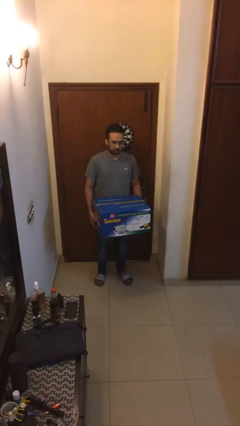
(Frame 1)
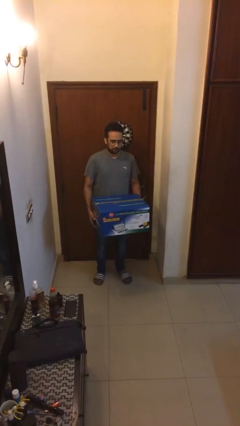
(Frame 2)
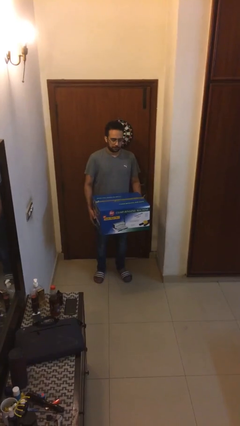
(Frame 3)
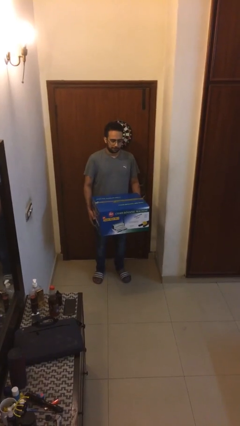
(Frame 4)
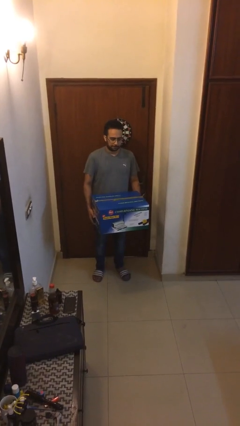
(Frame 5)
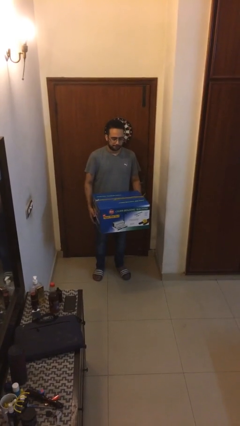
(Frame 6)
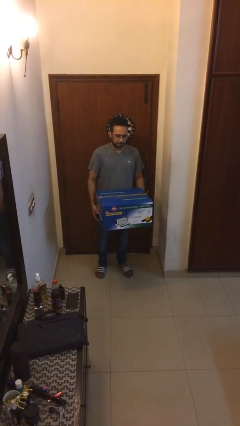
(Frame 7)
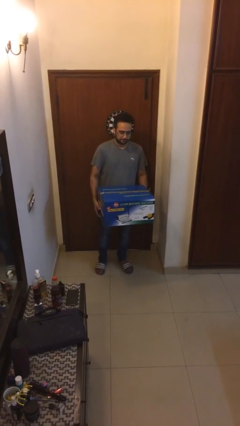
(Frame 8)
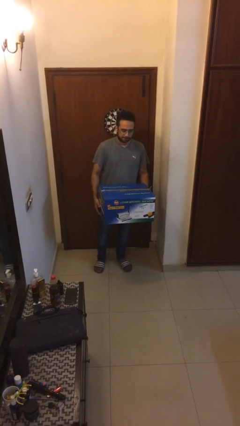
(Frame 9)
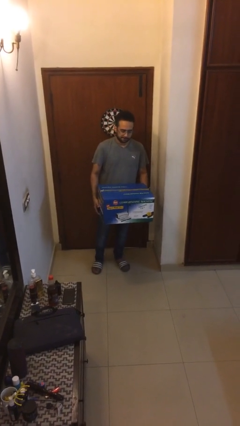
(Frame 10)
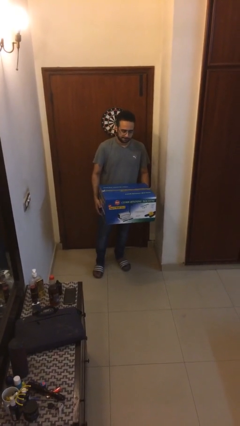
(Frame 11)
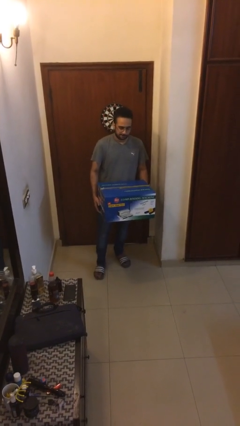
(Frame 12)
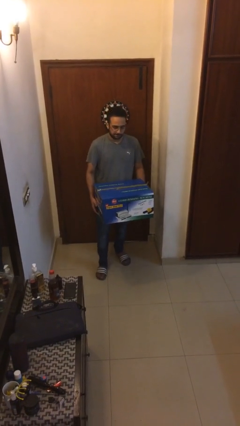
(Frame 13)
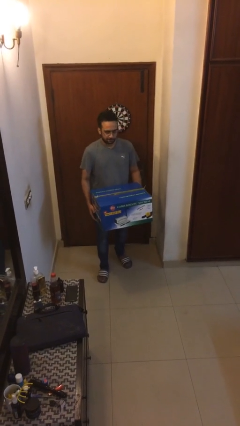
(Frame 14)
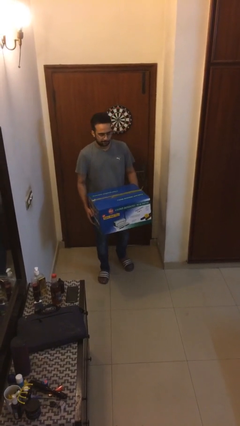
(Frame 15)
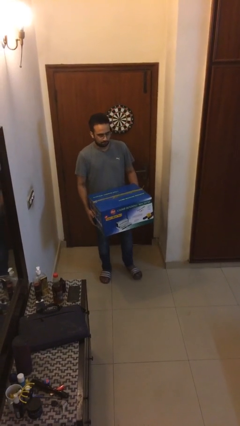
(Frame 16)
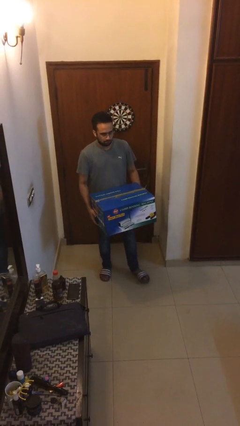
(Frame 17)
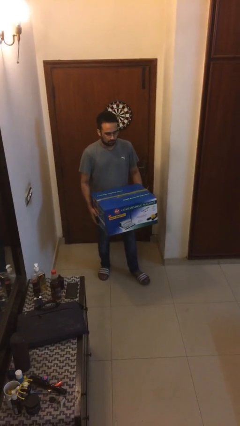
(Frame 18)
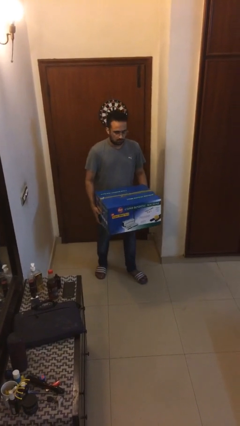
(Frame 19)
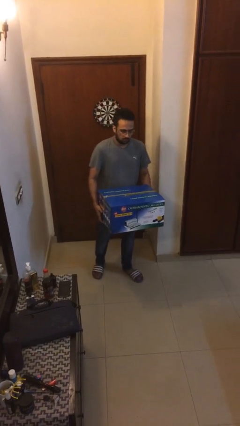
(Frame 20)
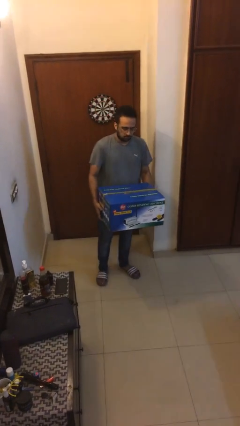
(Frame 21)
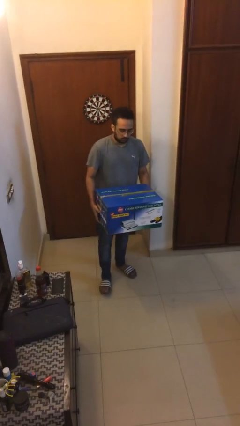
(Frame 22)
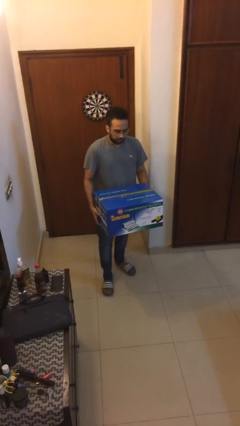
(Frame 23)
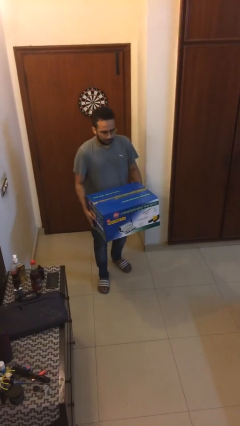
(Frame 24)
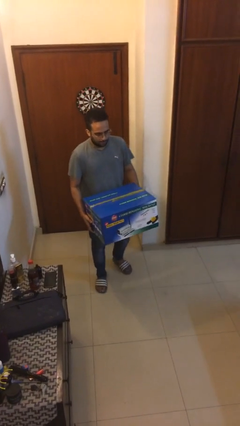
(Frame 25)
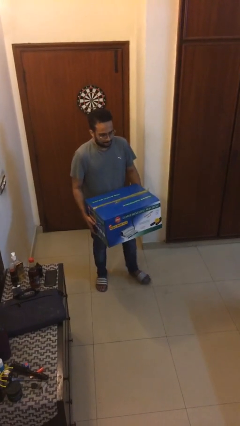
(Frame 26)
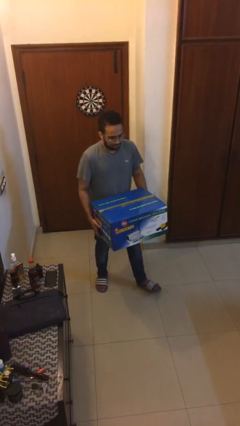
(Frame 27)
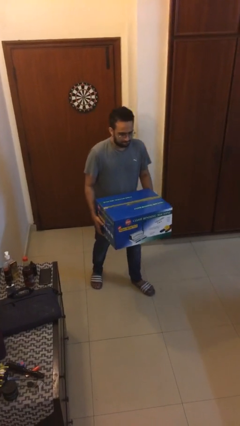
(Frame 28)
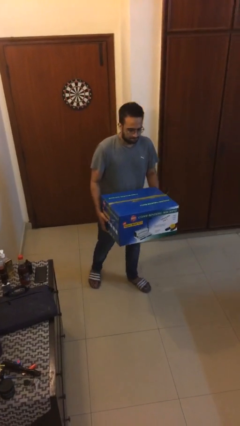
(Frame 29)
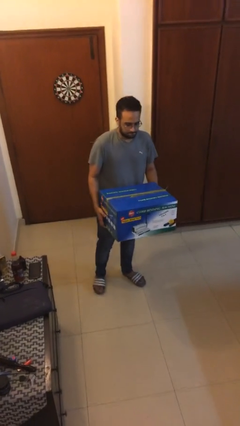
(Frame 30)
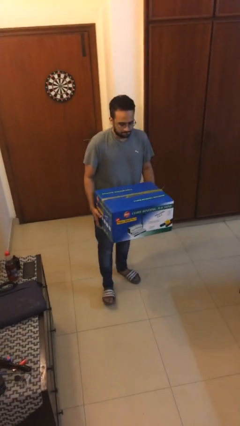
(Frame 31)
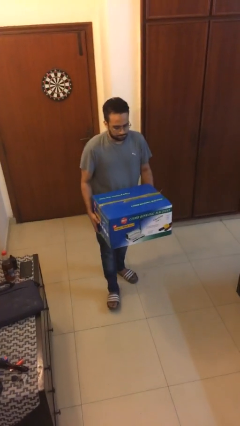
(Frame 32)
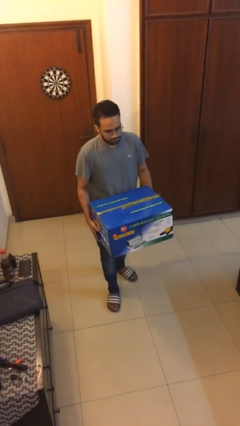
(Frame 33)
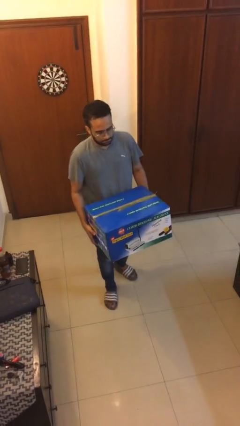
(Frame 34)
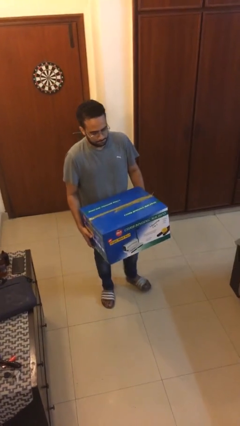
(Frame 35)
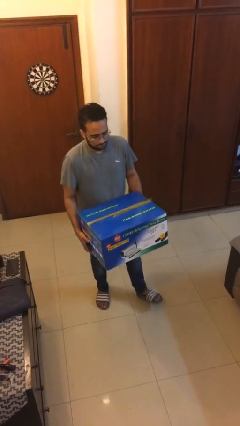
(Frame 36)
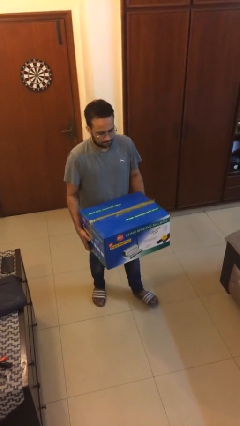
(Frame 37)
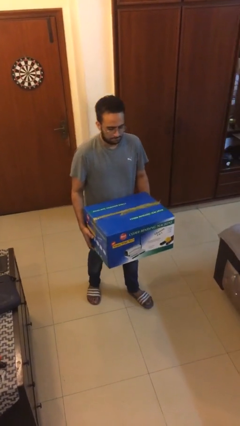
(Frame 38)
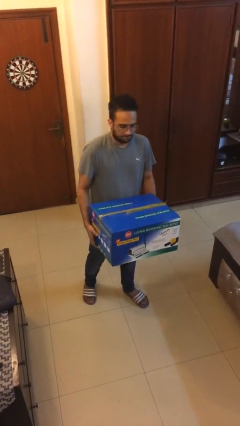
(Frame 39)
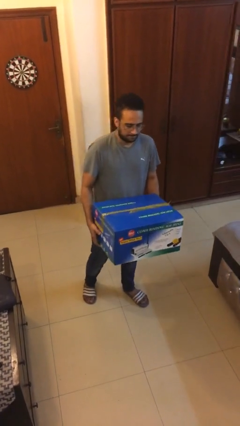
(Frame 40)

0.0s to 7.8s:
person carries heavy object

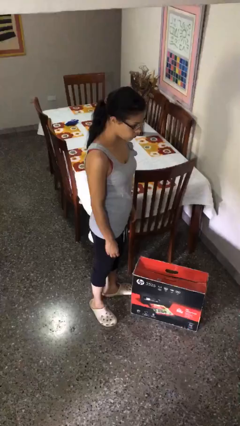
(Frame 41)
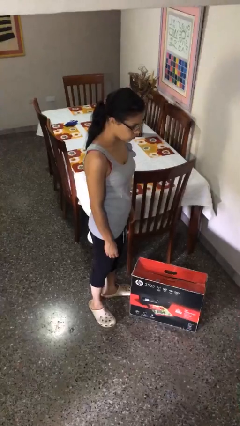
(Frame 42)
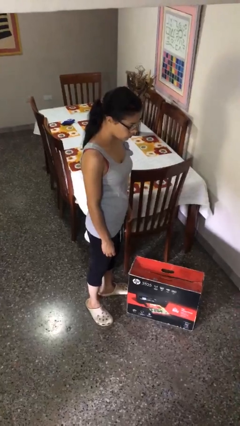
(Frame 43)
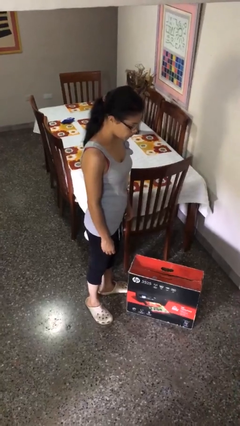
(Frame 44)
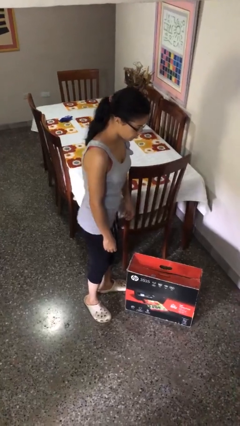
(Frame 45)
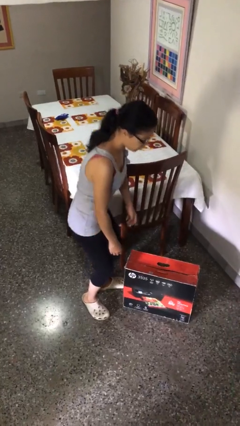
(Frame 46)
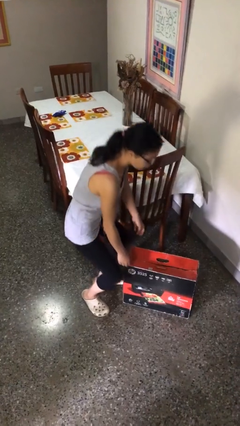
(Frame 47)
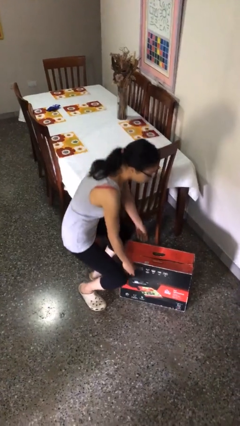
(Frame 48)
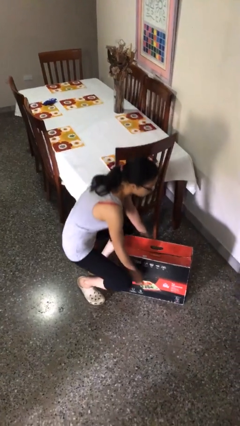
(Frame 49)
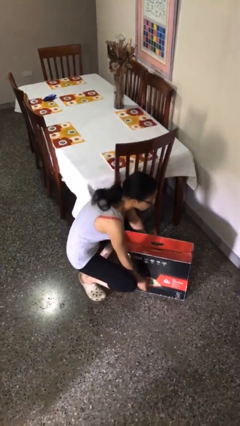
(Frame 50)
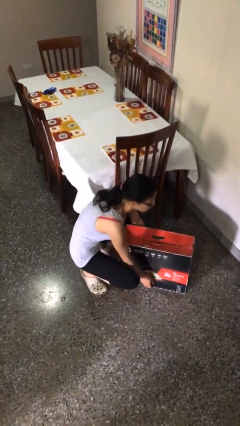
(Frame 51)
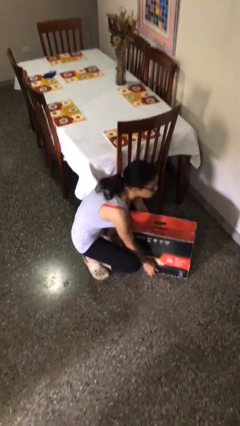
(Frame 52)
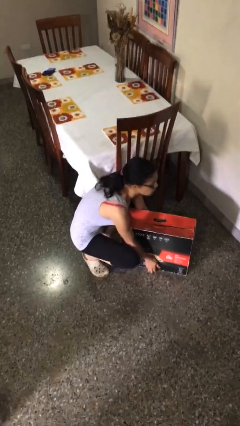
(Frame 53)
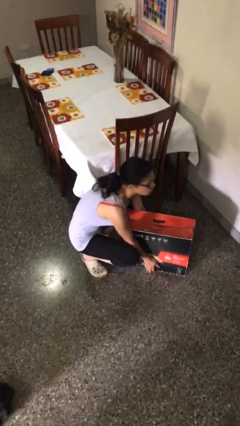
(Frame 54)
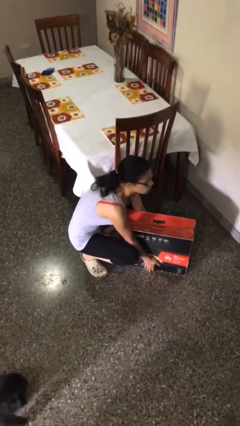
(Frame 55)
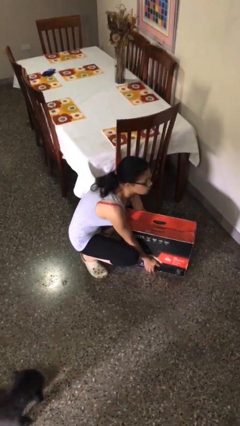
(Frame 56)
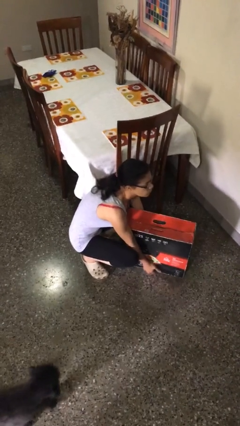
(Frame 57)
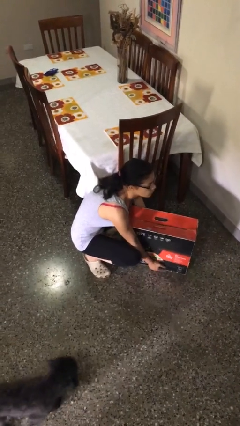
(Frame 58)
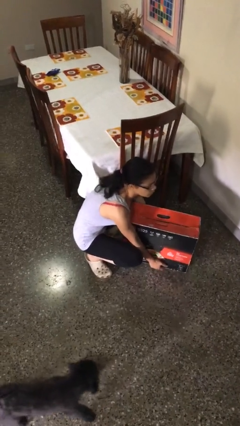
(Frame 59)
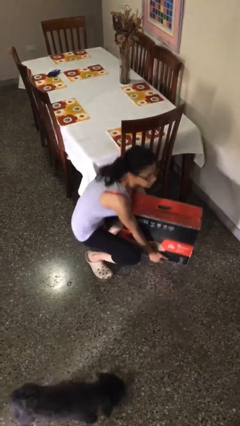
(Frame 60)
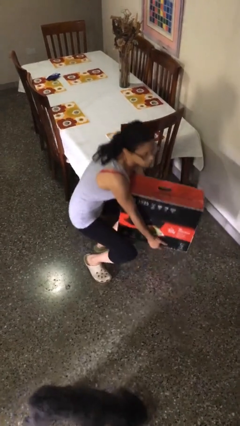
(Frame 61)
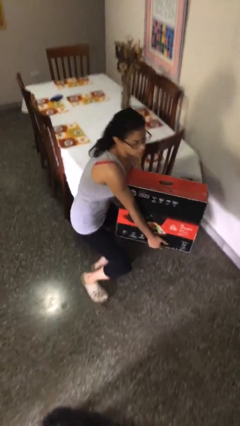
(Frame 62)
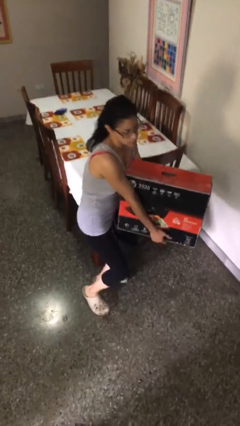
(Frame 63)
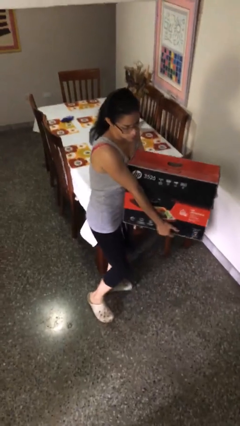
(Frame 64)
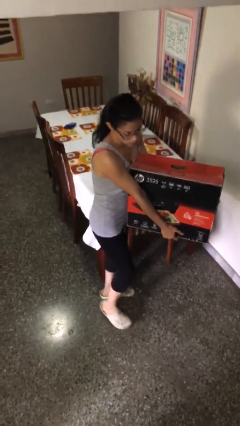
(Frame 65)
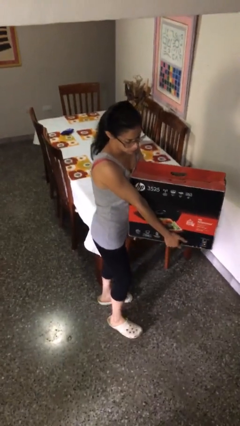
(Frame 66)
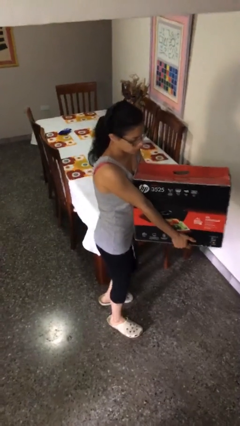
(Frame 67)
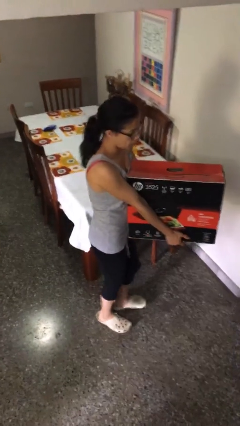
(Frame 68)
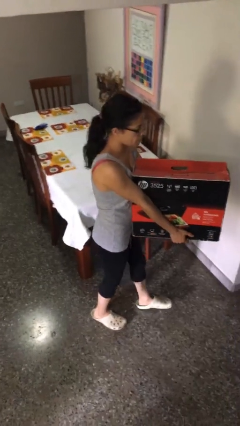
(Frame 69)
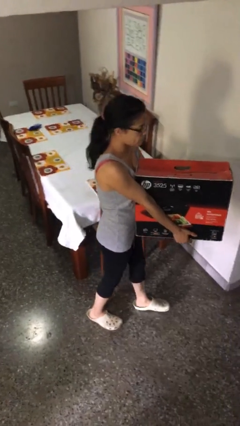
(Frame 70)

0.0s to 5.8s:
person picks up object from floor

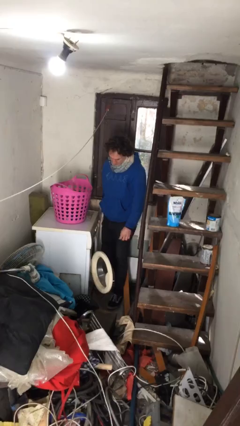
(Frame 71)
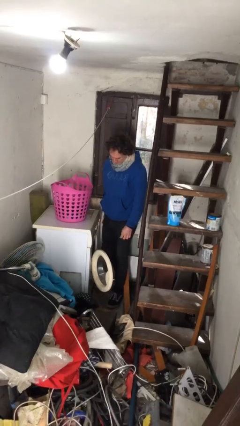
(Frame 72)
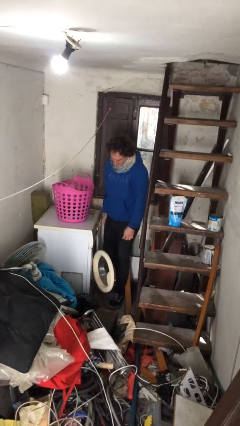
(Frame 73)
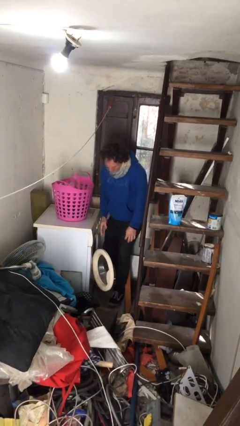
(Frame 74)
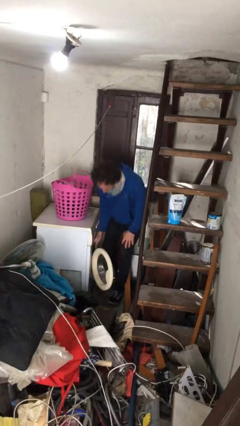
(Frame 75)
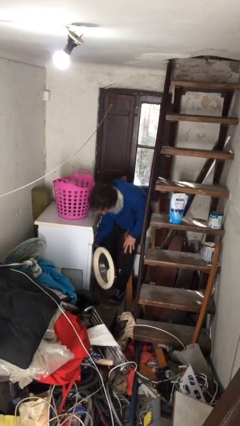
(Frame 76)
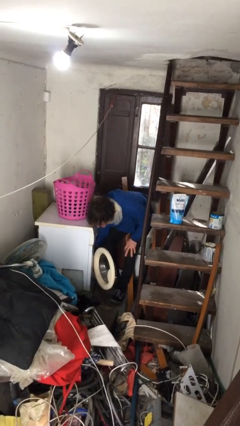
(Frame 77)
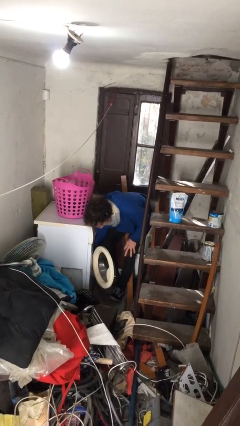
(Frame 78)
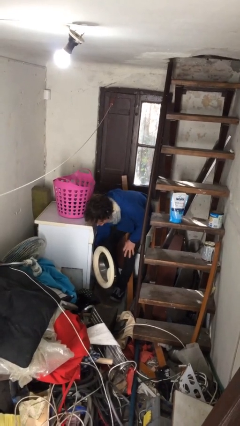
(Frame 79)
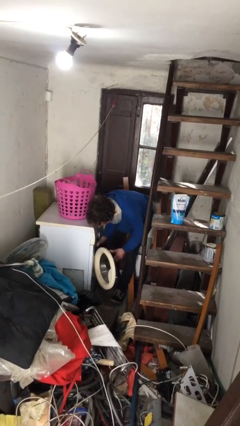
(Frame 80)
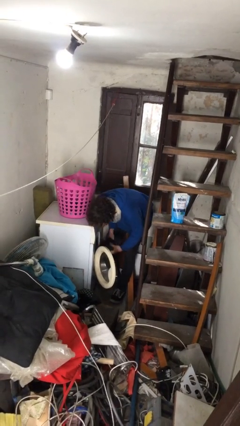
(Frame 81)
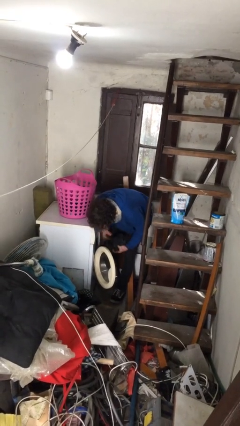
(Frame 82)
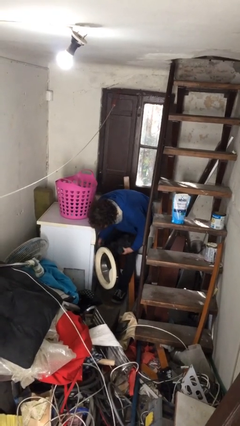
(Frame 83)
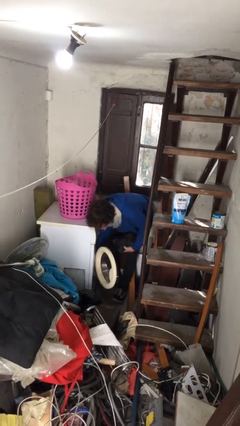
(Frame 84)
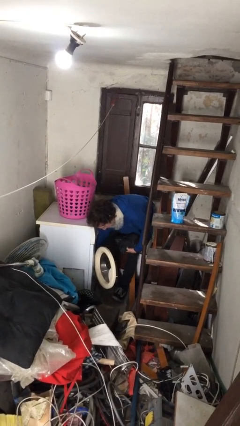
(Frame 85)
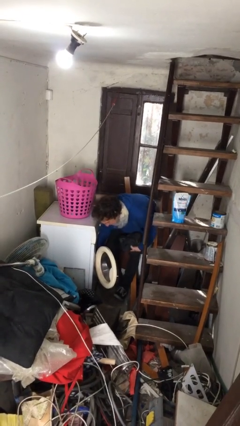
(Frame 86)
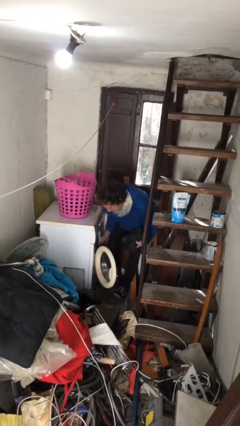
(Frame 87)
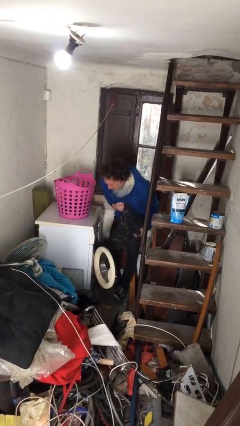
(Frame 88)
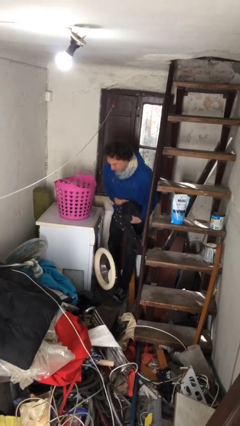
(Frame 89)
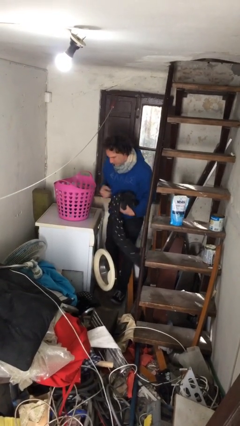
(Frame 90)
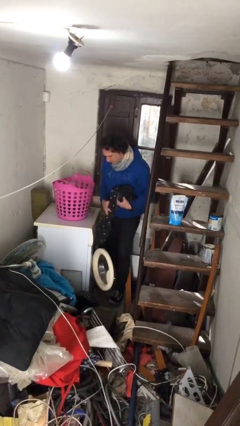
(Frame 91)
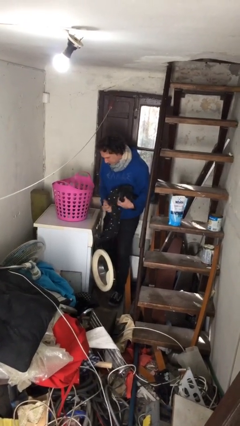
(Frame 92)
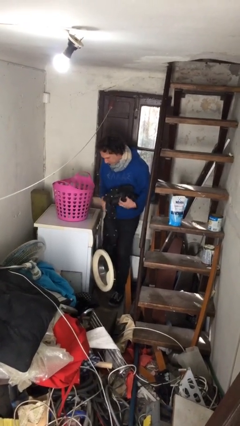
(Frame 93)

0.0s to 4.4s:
person loads clotheswasher

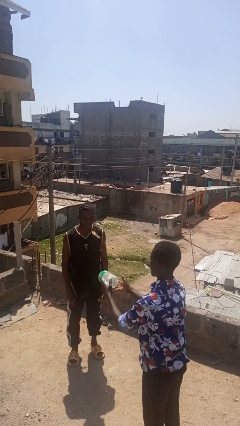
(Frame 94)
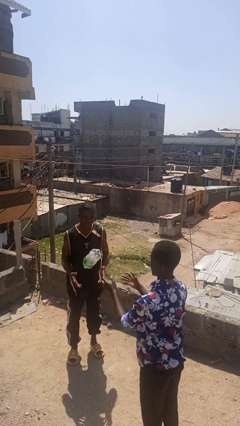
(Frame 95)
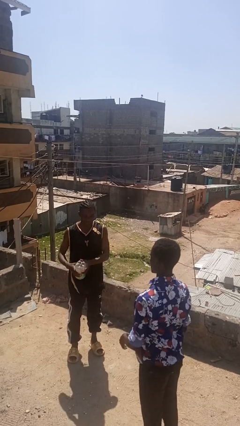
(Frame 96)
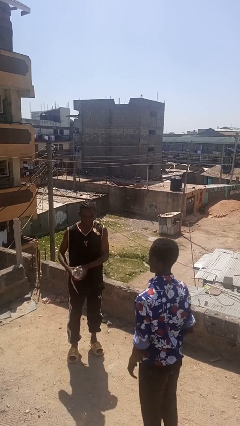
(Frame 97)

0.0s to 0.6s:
person throws object to person
